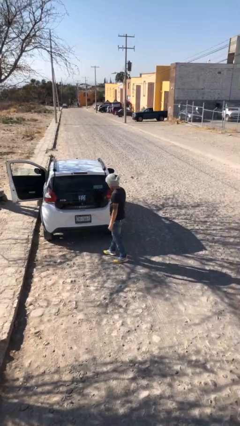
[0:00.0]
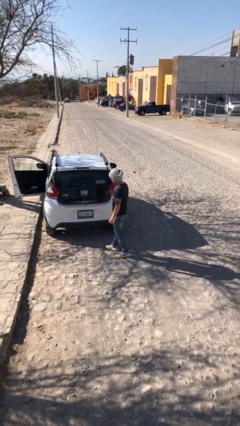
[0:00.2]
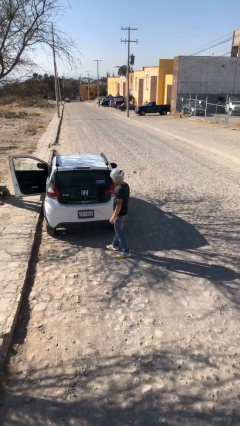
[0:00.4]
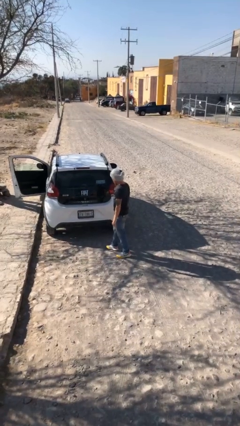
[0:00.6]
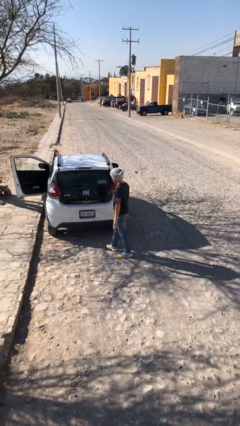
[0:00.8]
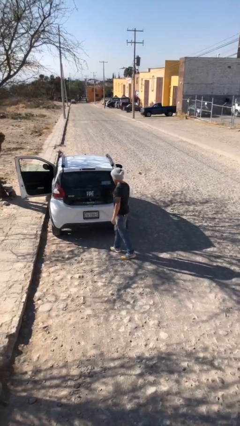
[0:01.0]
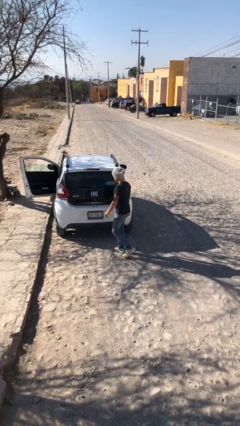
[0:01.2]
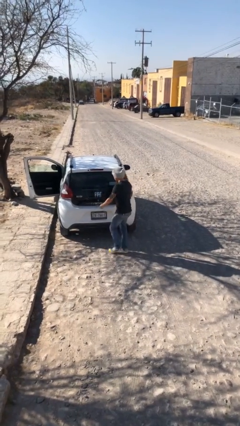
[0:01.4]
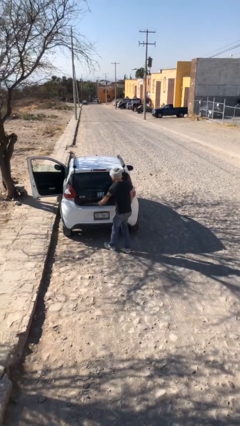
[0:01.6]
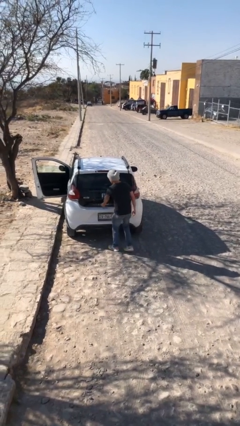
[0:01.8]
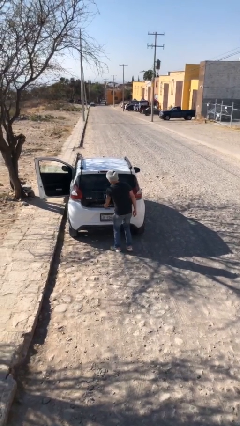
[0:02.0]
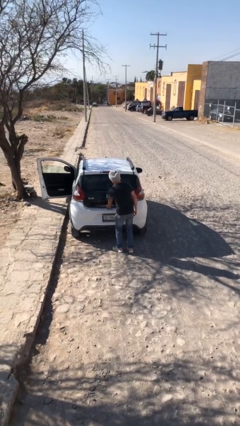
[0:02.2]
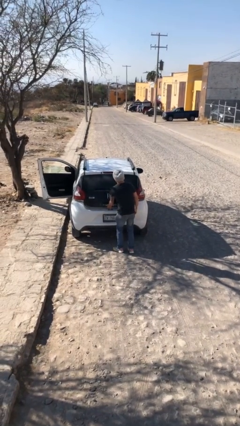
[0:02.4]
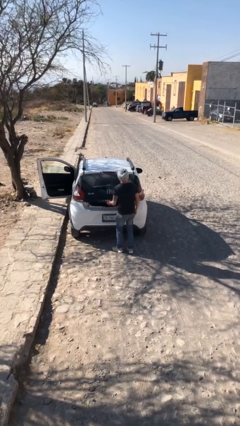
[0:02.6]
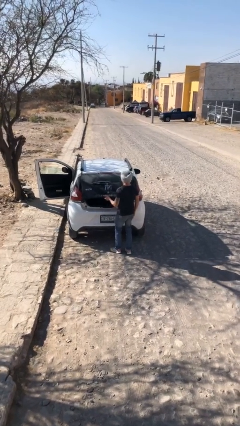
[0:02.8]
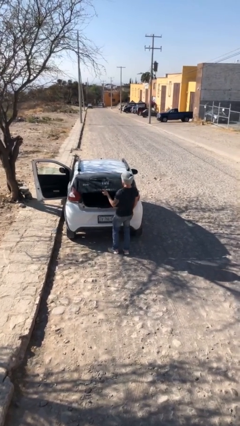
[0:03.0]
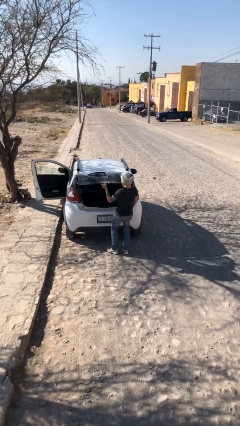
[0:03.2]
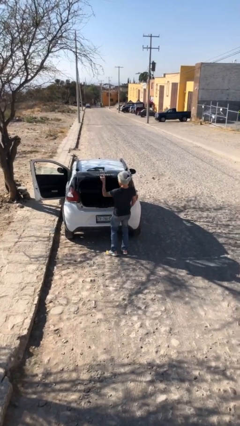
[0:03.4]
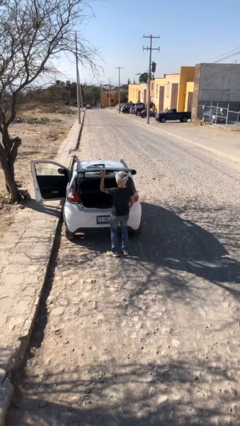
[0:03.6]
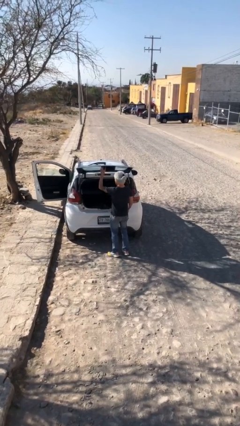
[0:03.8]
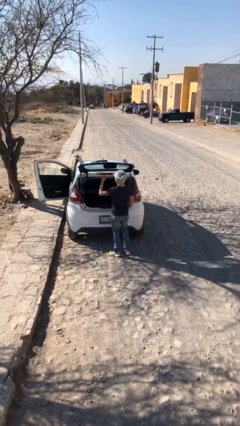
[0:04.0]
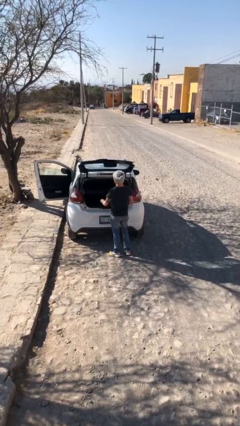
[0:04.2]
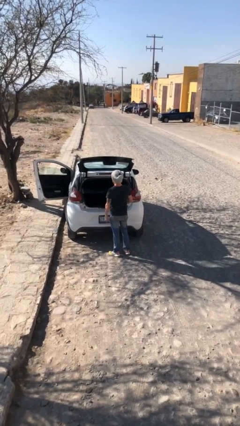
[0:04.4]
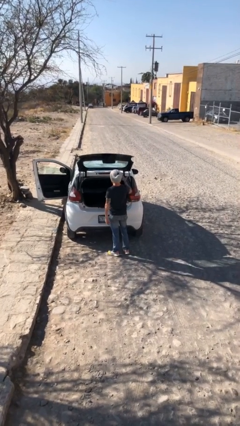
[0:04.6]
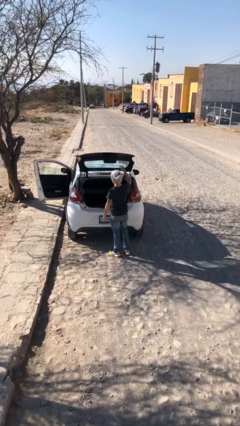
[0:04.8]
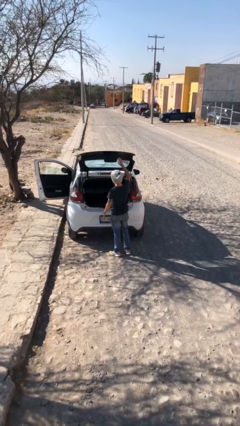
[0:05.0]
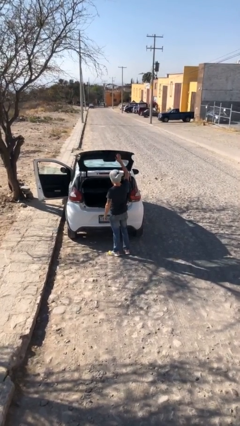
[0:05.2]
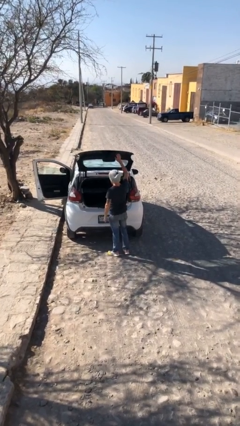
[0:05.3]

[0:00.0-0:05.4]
person opens car trunk

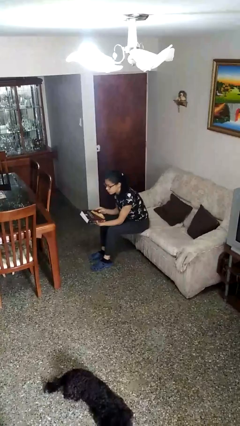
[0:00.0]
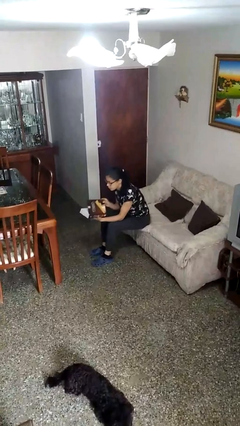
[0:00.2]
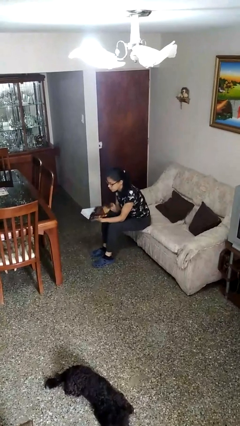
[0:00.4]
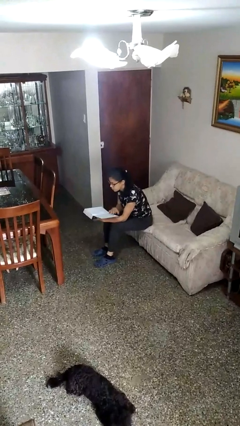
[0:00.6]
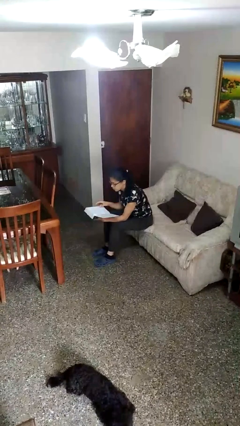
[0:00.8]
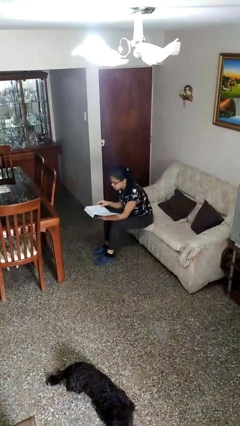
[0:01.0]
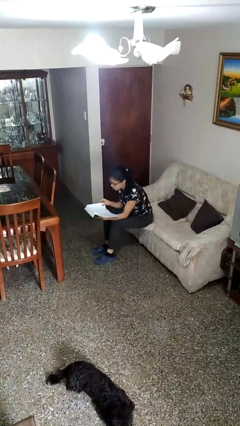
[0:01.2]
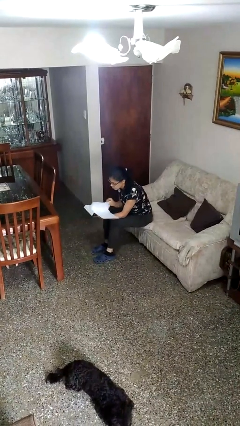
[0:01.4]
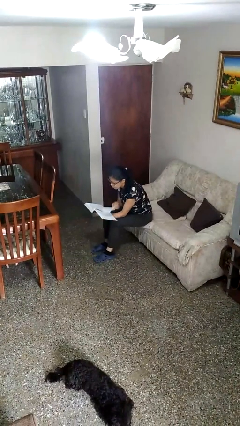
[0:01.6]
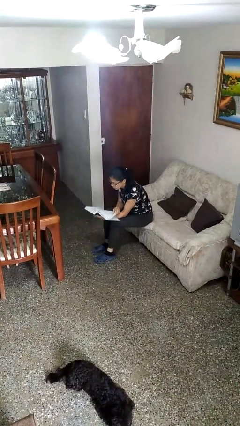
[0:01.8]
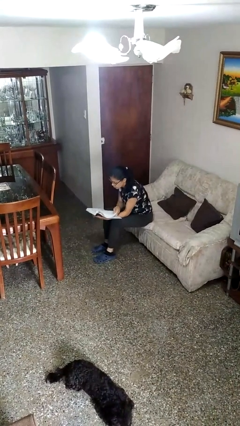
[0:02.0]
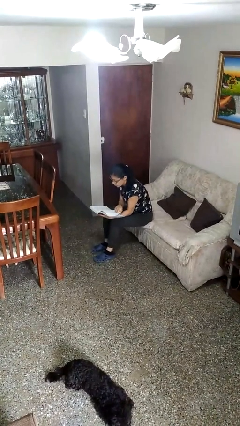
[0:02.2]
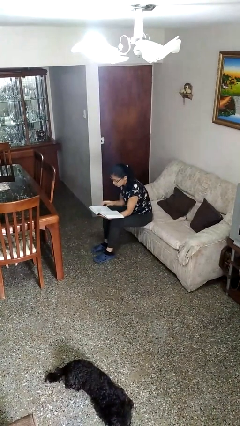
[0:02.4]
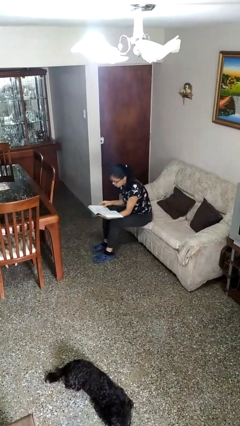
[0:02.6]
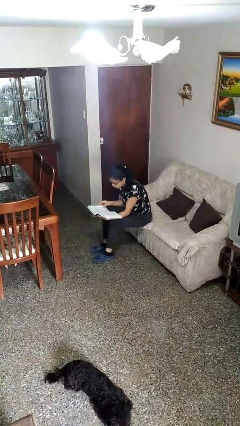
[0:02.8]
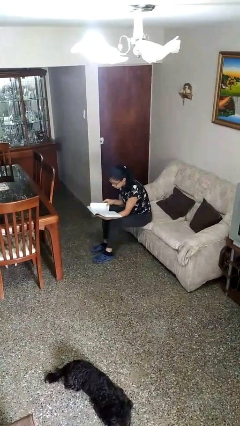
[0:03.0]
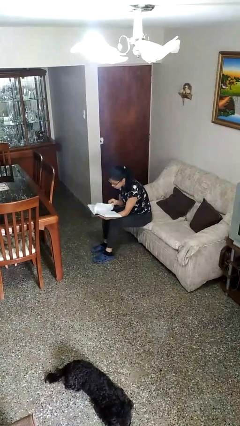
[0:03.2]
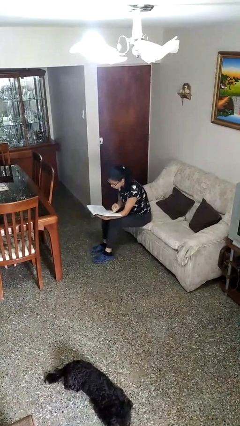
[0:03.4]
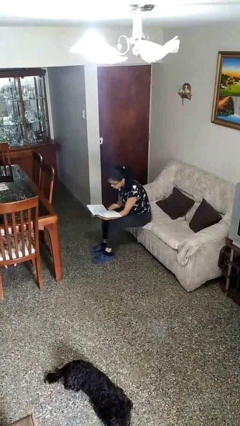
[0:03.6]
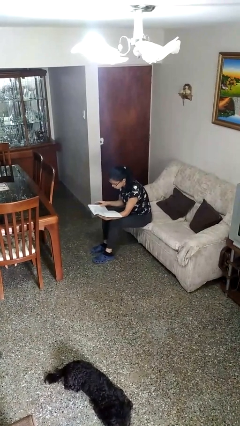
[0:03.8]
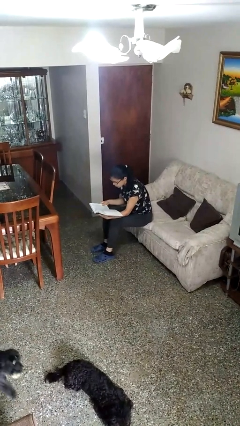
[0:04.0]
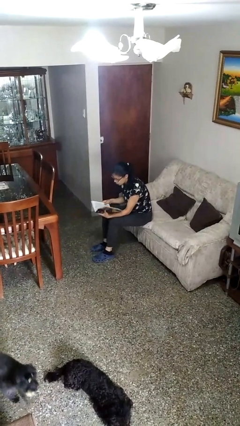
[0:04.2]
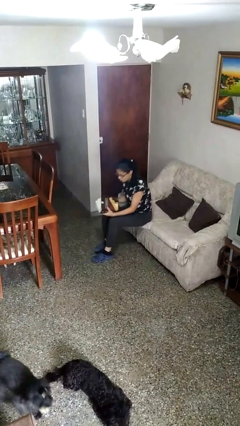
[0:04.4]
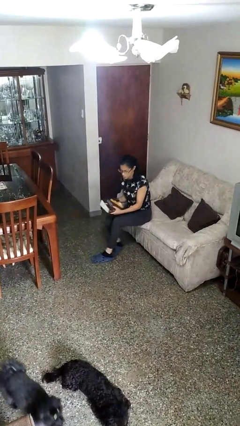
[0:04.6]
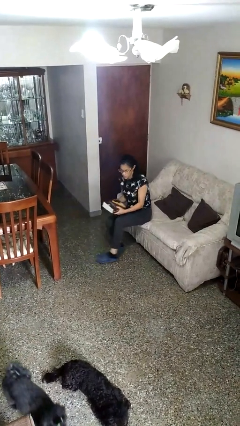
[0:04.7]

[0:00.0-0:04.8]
person reads book

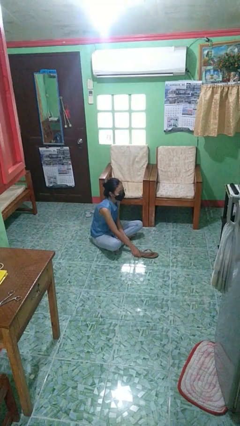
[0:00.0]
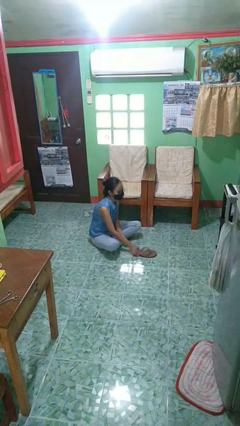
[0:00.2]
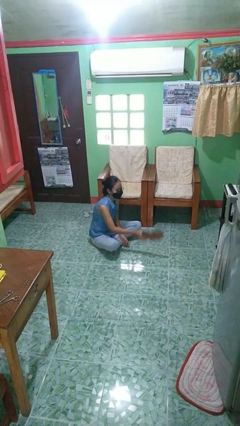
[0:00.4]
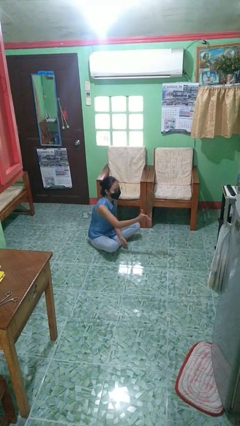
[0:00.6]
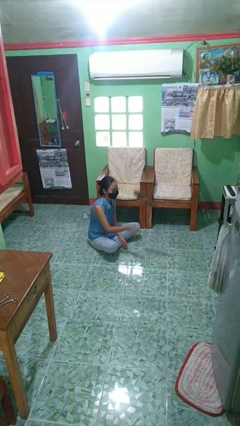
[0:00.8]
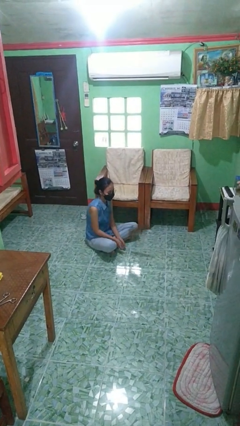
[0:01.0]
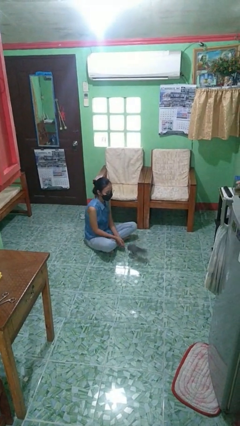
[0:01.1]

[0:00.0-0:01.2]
person throws object into air

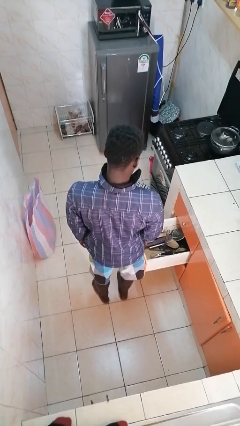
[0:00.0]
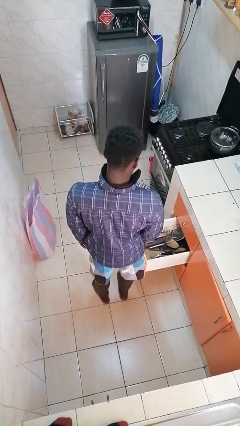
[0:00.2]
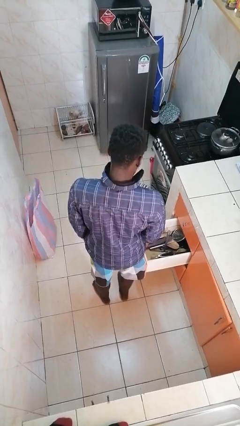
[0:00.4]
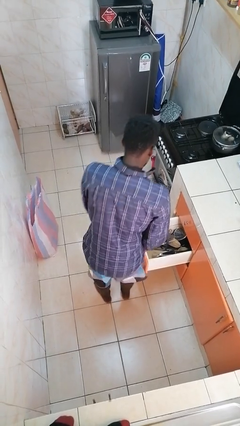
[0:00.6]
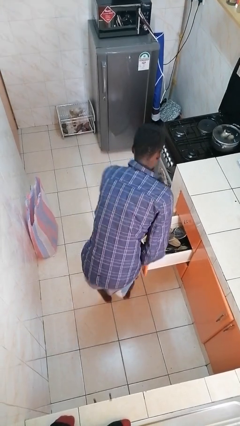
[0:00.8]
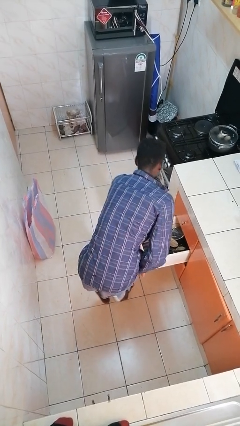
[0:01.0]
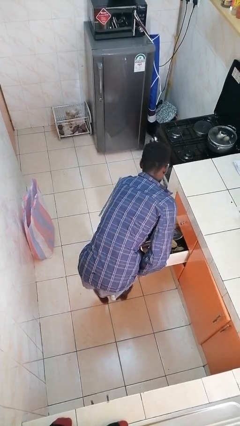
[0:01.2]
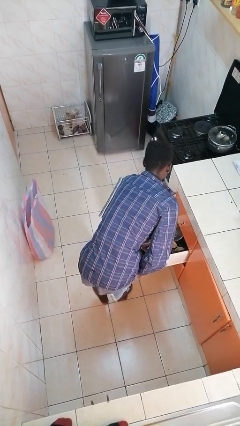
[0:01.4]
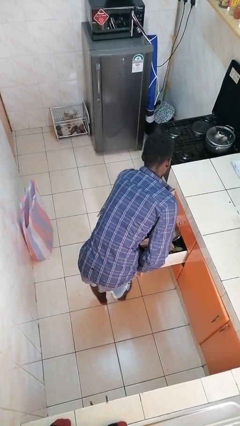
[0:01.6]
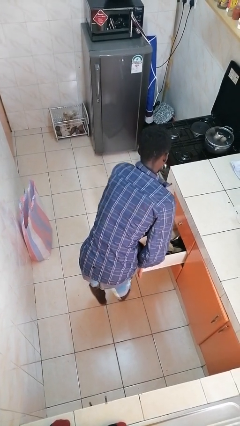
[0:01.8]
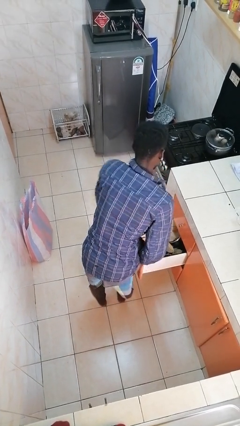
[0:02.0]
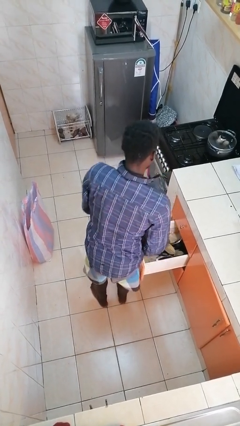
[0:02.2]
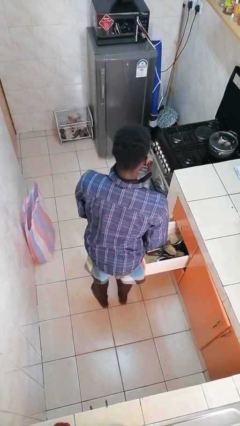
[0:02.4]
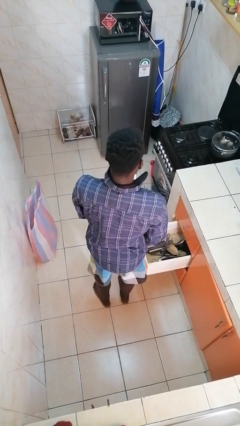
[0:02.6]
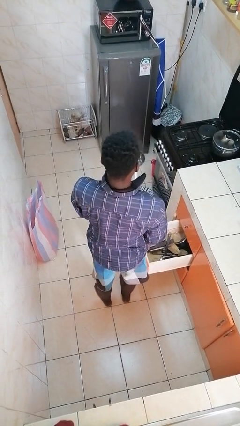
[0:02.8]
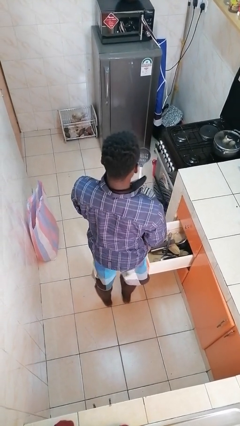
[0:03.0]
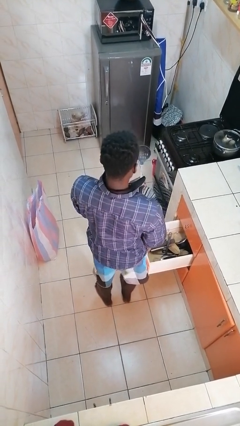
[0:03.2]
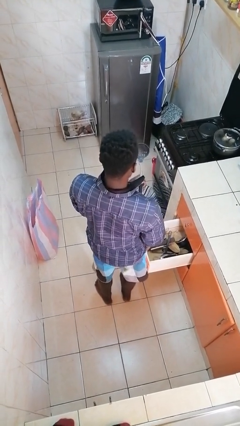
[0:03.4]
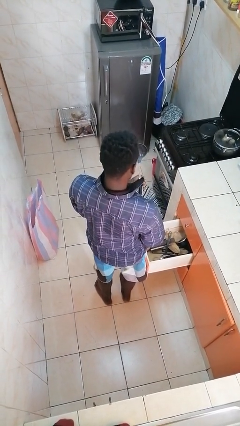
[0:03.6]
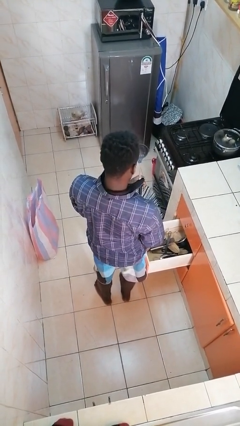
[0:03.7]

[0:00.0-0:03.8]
person takes object from kitchen drawer

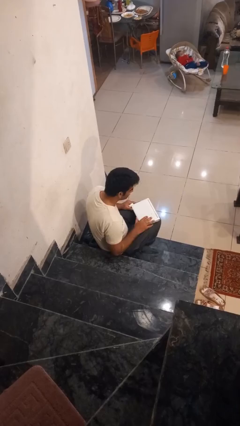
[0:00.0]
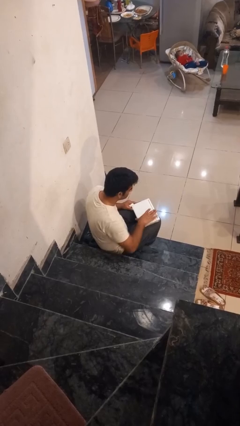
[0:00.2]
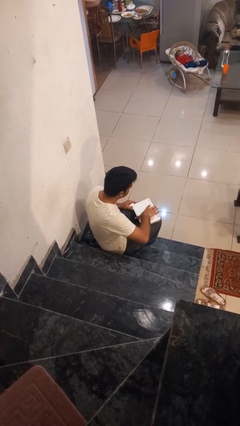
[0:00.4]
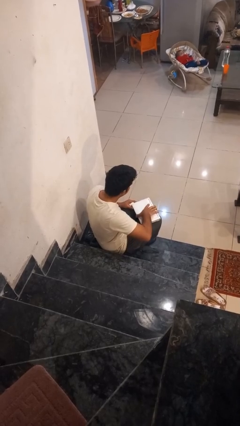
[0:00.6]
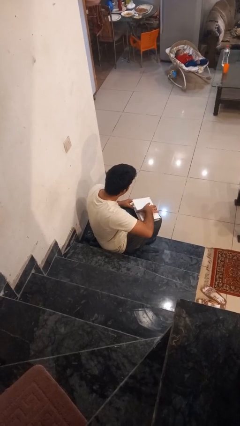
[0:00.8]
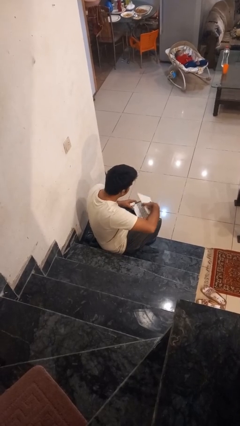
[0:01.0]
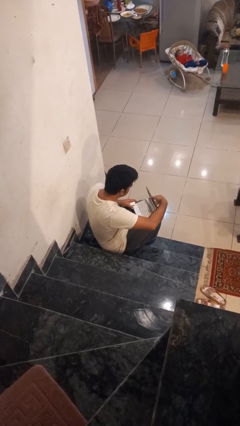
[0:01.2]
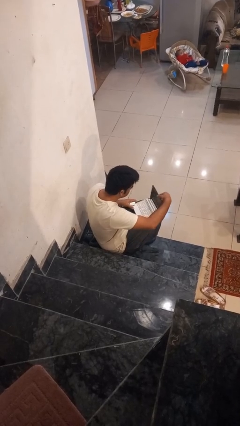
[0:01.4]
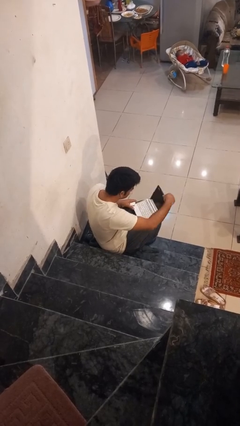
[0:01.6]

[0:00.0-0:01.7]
person interacts with laptop

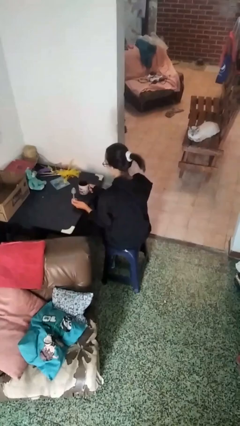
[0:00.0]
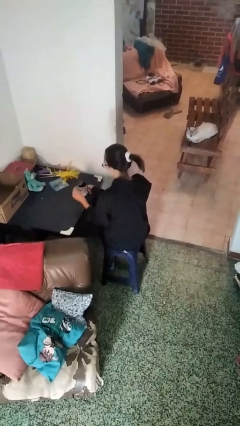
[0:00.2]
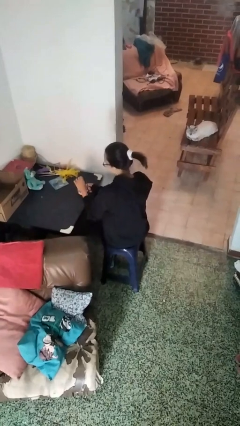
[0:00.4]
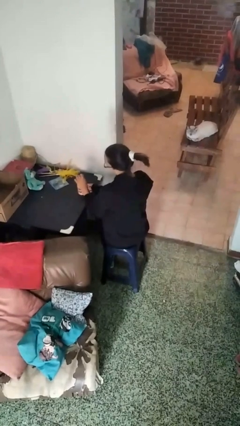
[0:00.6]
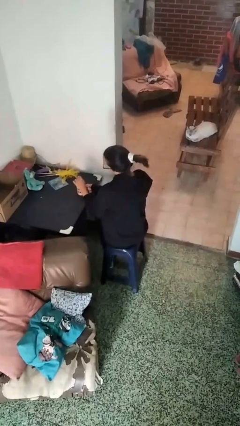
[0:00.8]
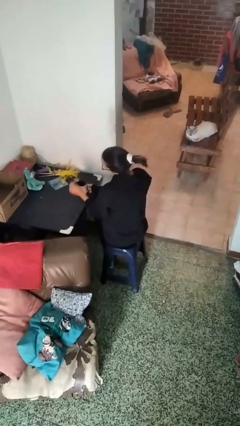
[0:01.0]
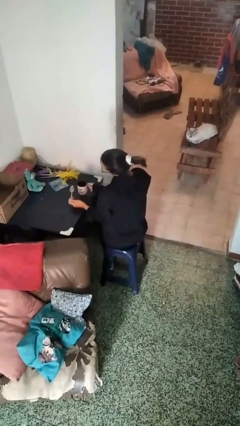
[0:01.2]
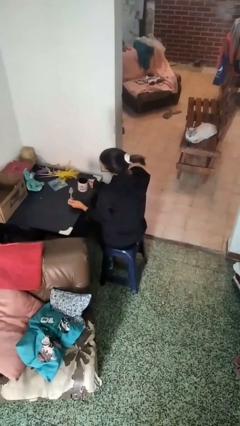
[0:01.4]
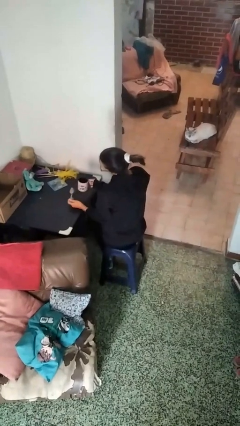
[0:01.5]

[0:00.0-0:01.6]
person stirs mug
